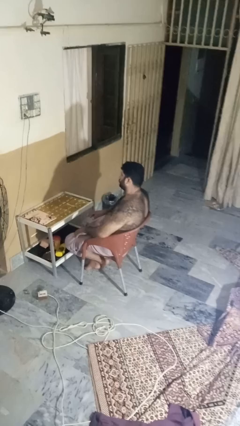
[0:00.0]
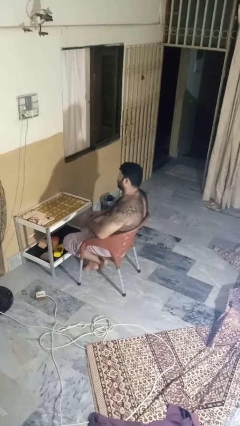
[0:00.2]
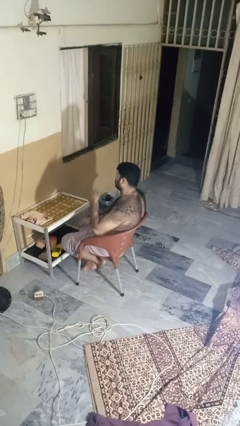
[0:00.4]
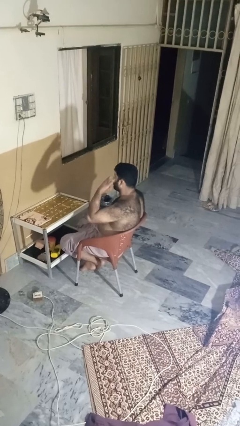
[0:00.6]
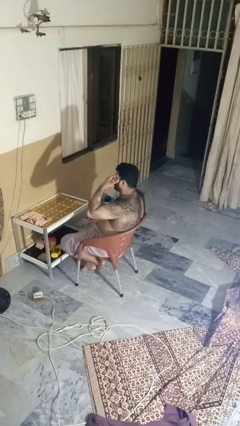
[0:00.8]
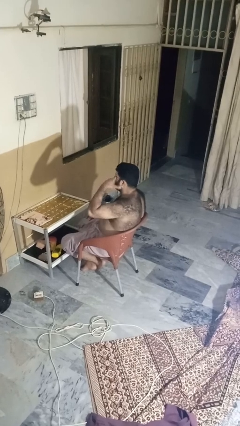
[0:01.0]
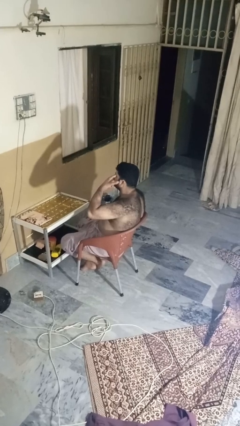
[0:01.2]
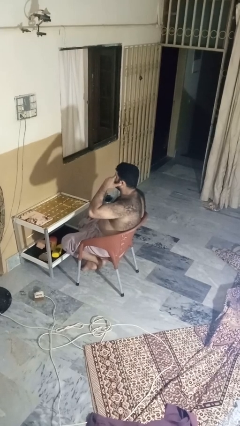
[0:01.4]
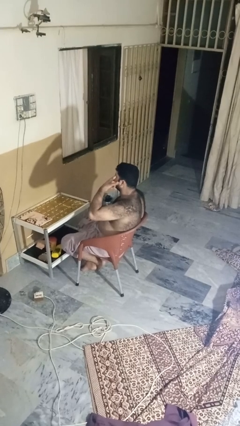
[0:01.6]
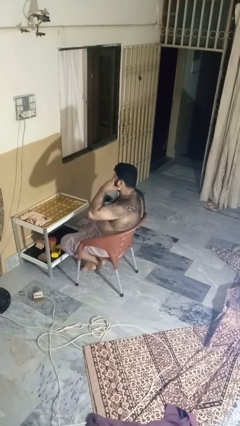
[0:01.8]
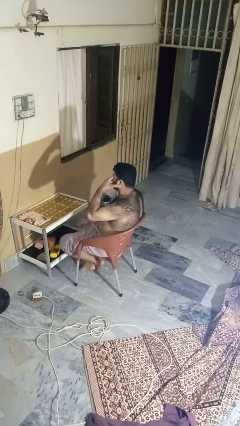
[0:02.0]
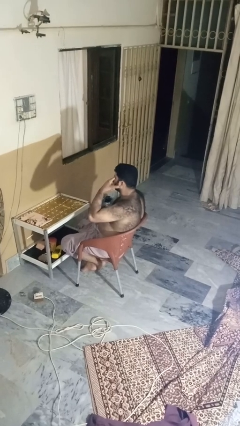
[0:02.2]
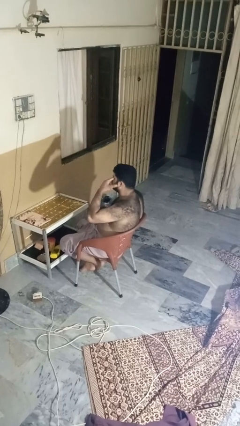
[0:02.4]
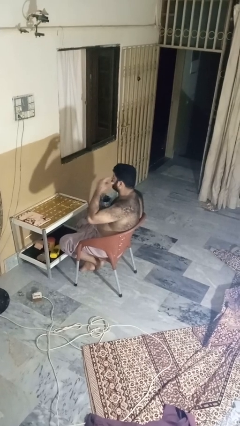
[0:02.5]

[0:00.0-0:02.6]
person rubs eyes

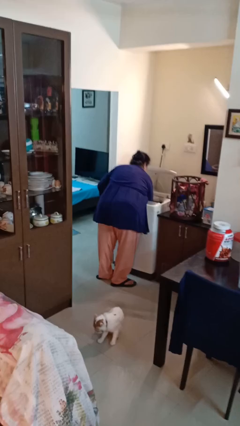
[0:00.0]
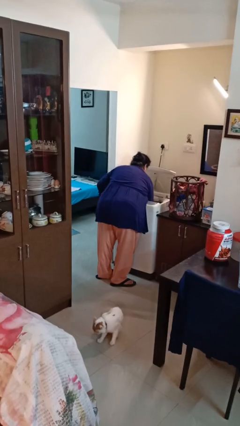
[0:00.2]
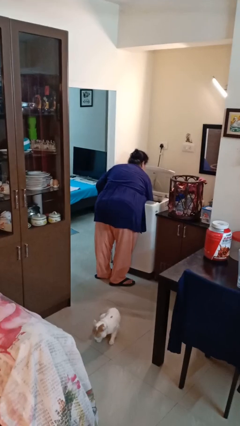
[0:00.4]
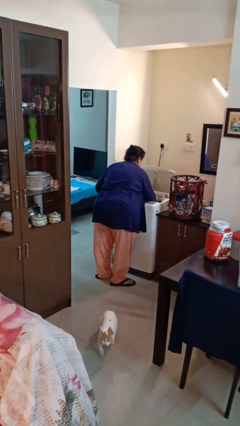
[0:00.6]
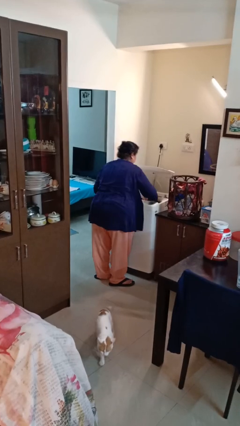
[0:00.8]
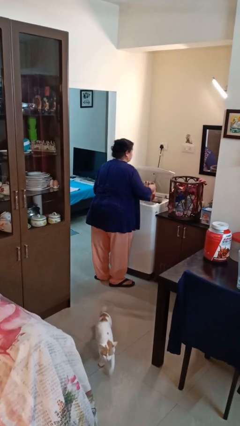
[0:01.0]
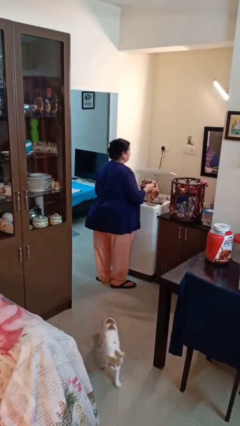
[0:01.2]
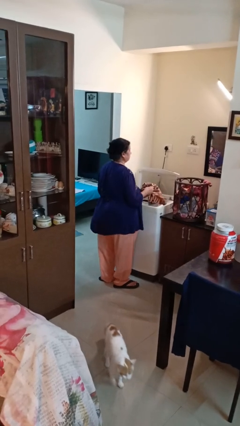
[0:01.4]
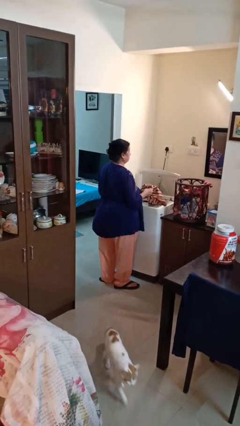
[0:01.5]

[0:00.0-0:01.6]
person unloads clotheswasher

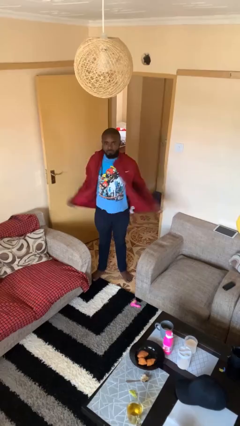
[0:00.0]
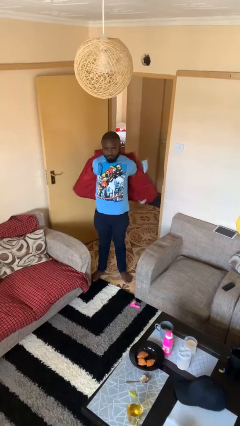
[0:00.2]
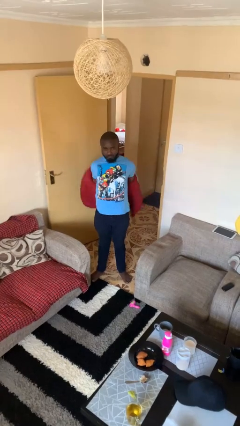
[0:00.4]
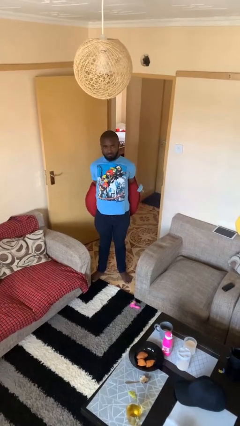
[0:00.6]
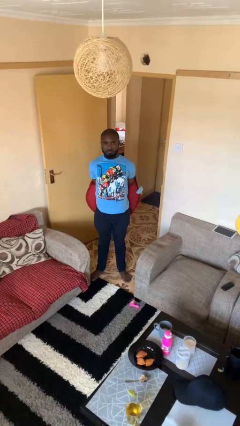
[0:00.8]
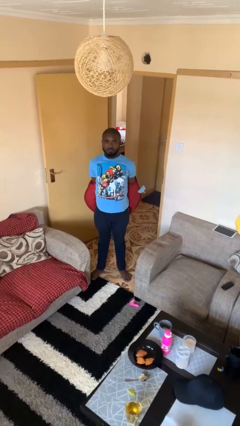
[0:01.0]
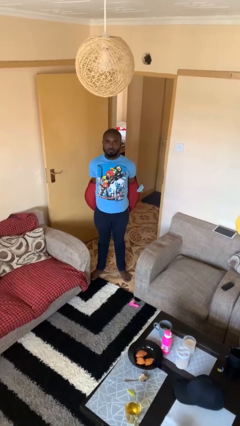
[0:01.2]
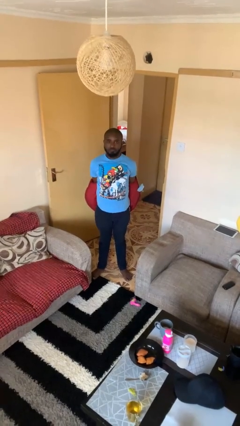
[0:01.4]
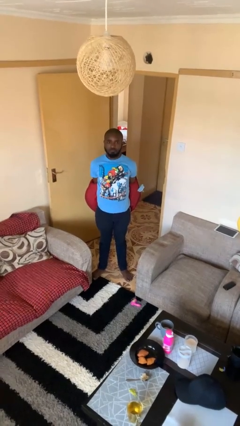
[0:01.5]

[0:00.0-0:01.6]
person takes off jacket

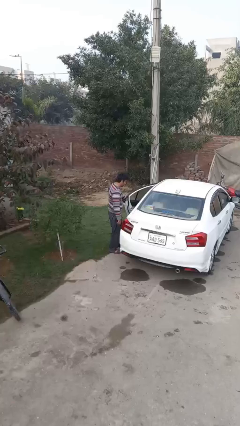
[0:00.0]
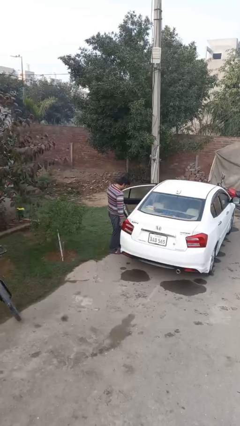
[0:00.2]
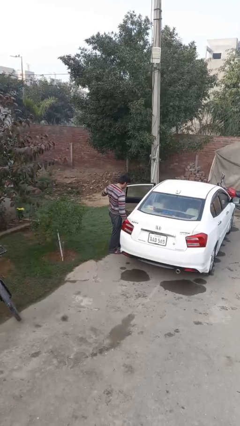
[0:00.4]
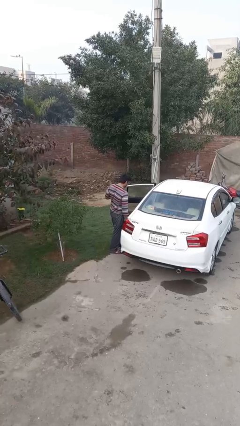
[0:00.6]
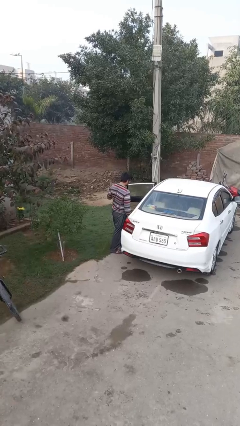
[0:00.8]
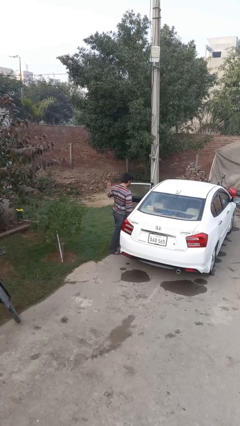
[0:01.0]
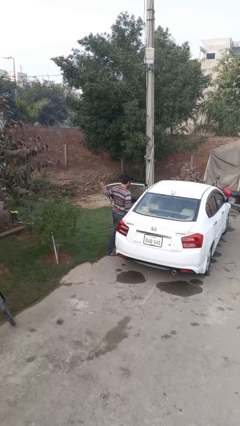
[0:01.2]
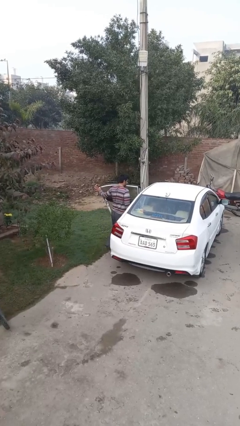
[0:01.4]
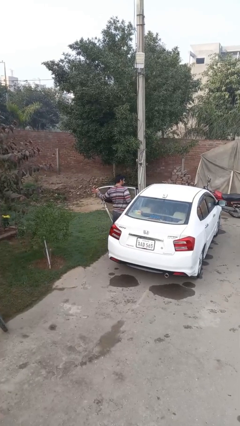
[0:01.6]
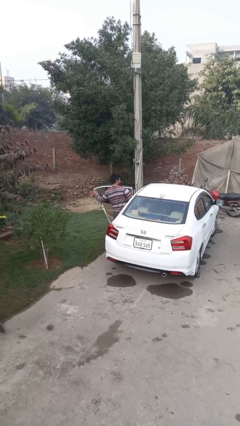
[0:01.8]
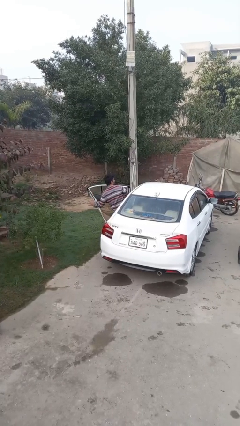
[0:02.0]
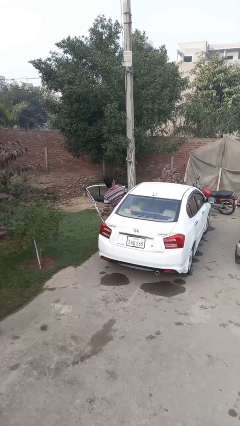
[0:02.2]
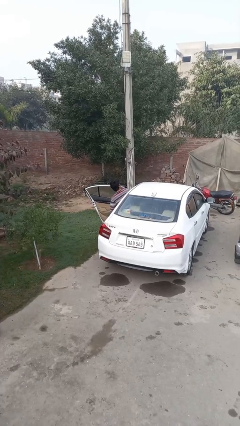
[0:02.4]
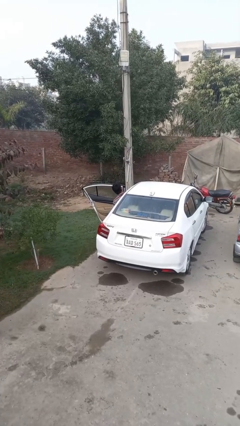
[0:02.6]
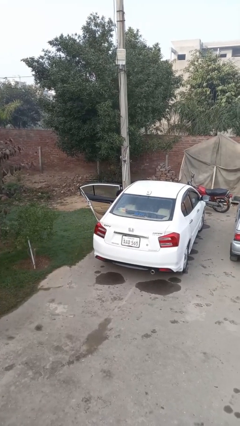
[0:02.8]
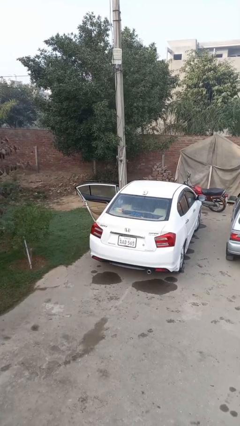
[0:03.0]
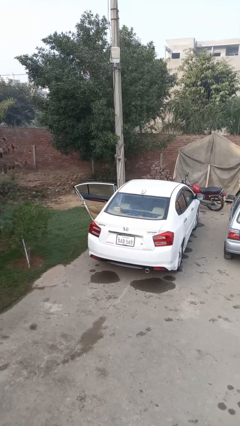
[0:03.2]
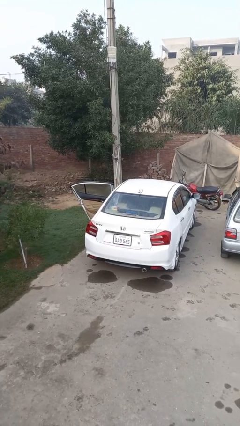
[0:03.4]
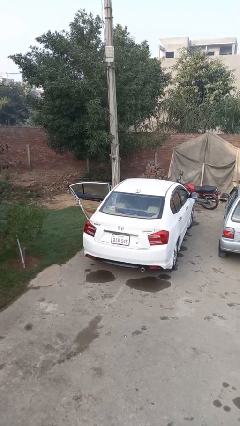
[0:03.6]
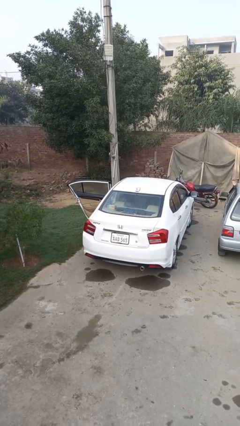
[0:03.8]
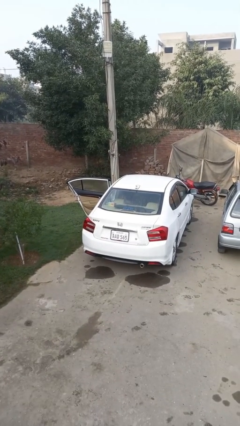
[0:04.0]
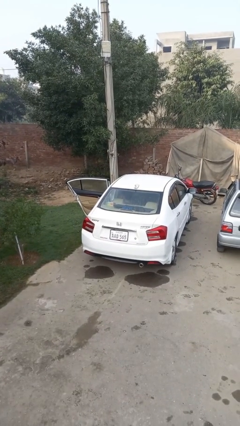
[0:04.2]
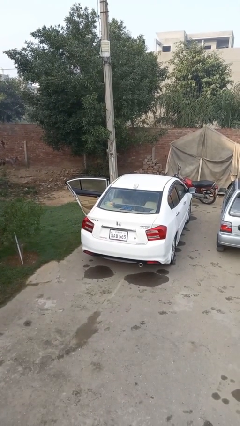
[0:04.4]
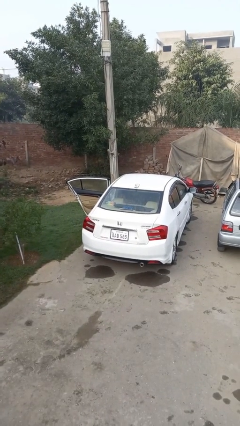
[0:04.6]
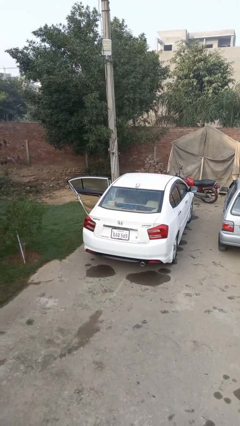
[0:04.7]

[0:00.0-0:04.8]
person enters car

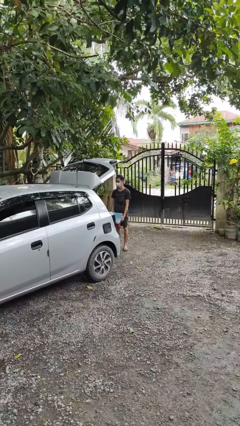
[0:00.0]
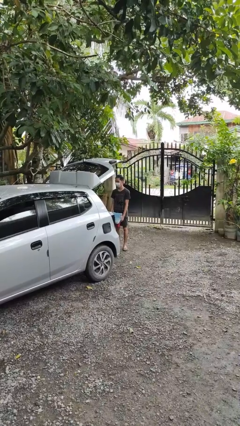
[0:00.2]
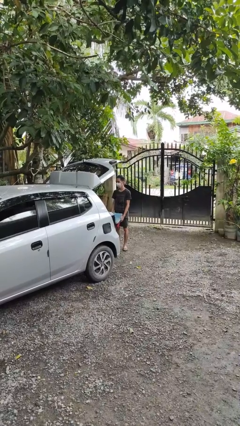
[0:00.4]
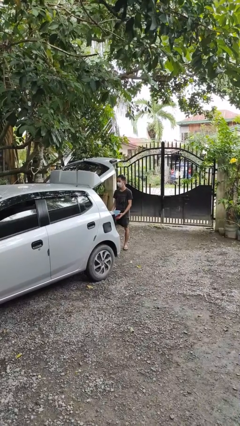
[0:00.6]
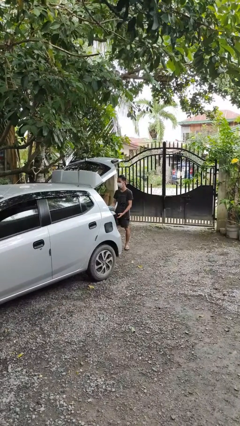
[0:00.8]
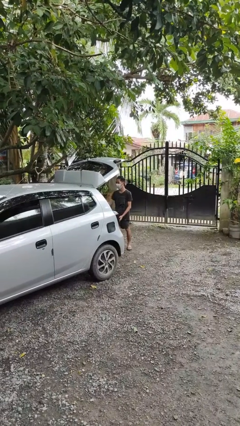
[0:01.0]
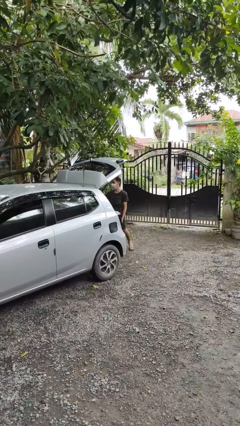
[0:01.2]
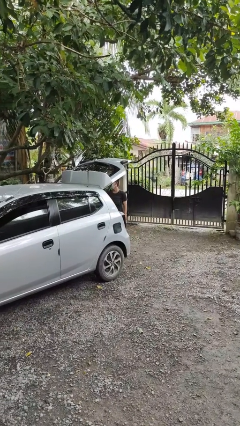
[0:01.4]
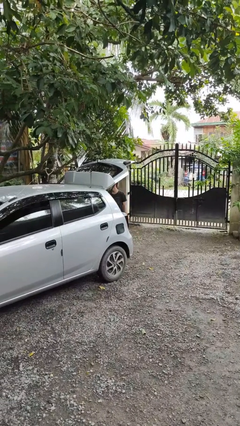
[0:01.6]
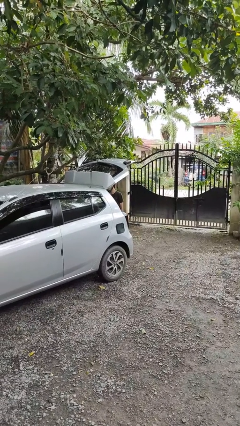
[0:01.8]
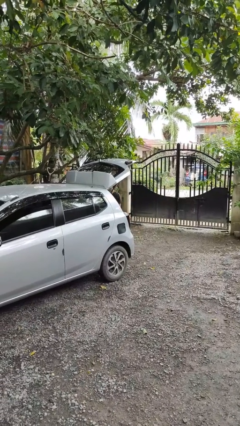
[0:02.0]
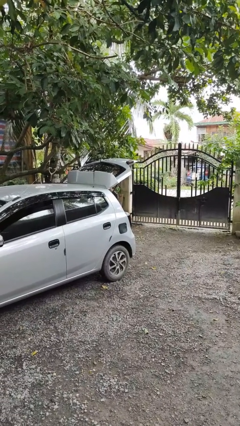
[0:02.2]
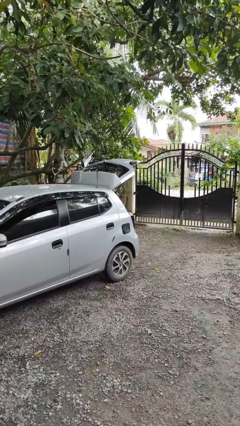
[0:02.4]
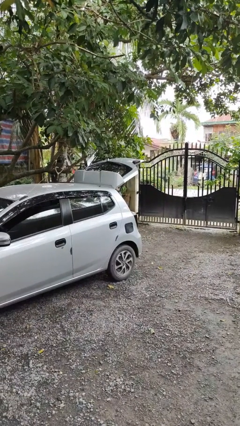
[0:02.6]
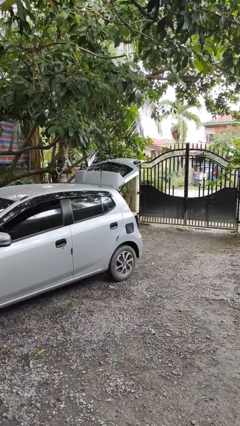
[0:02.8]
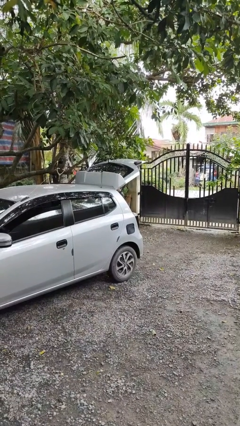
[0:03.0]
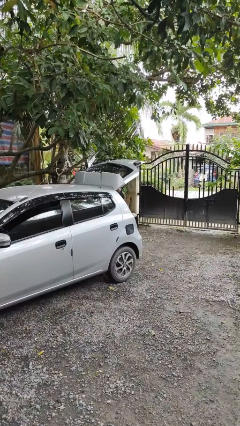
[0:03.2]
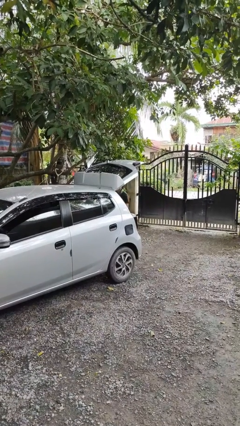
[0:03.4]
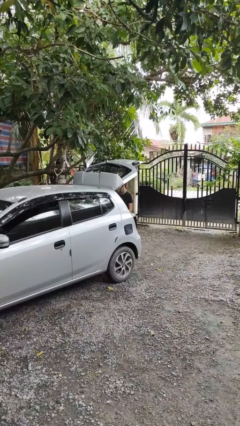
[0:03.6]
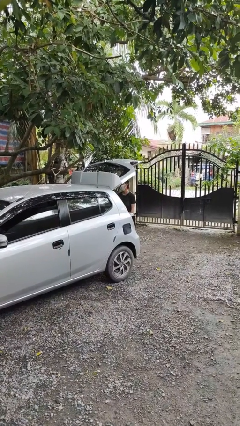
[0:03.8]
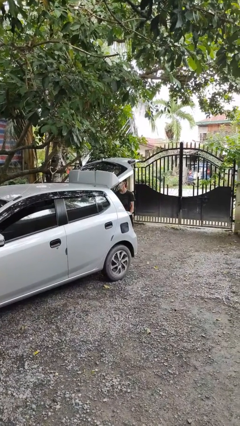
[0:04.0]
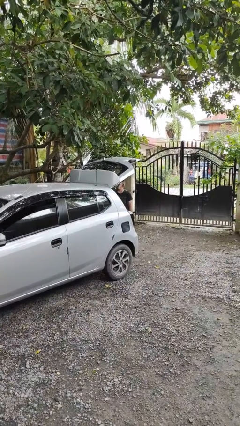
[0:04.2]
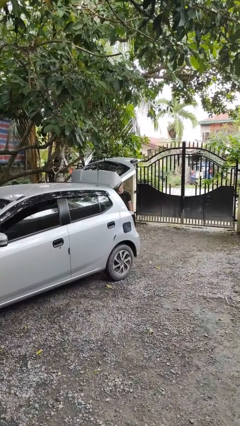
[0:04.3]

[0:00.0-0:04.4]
person loads car

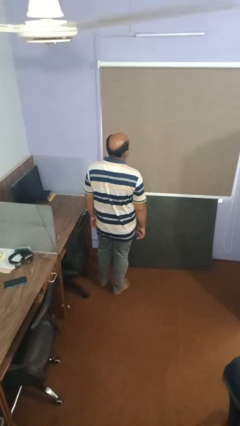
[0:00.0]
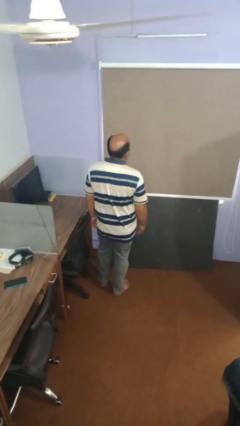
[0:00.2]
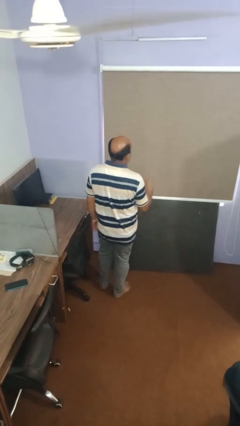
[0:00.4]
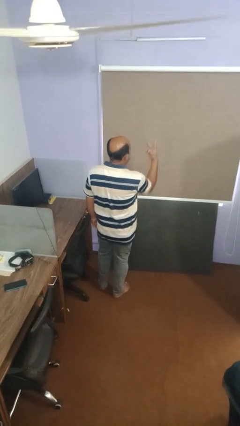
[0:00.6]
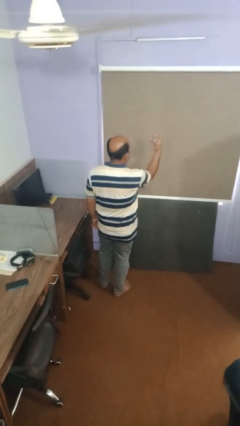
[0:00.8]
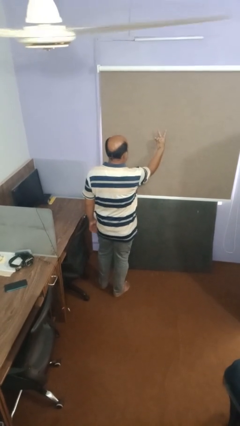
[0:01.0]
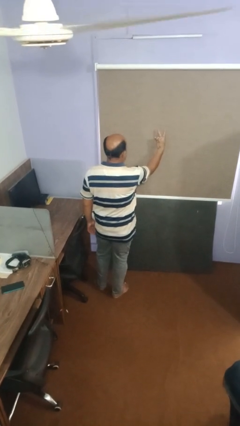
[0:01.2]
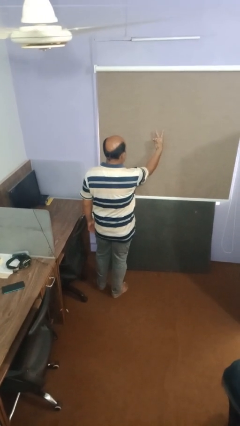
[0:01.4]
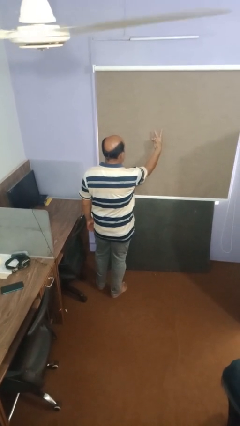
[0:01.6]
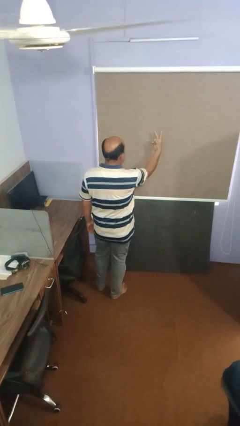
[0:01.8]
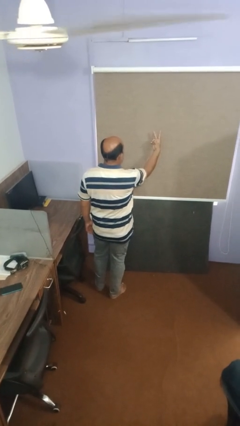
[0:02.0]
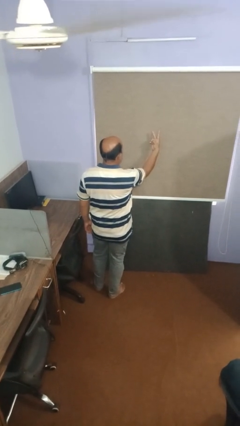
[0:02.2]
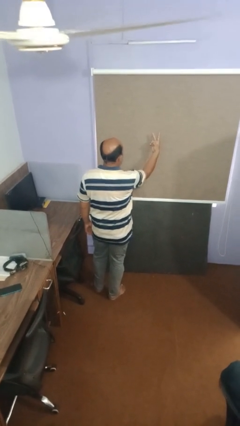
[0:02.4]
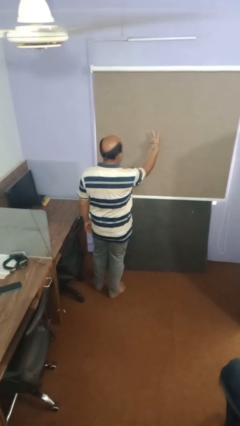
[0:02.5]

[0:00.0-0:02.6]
person gestures peace
